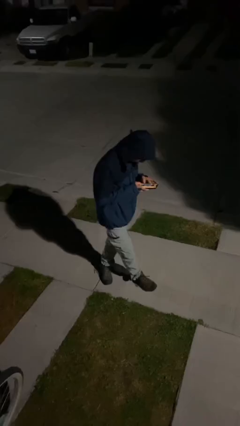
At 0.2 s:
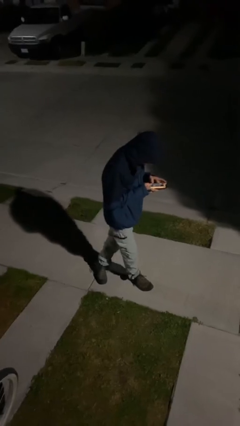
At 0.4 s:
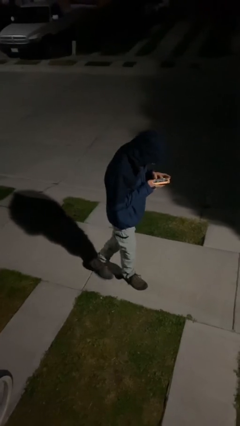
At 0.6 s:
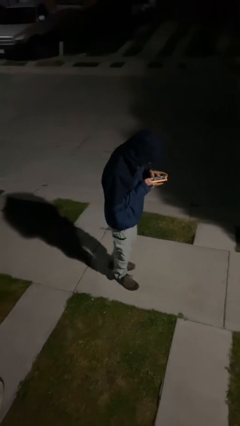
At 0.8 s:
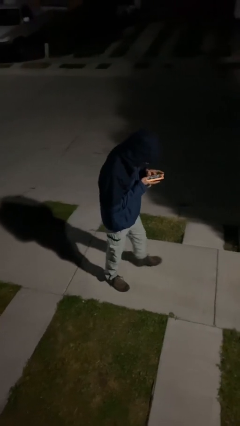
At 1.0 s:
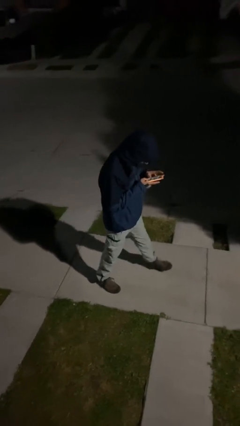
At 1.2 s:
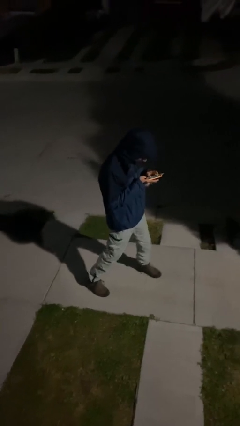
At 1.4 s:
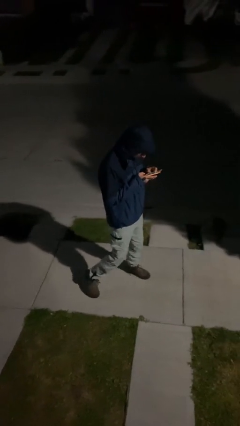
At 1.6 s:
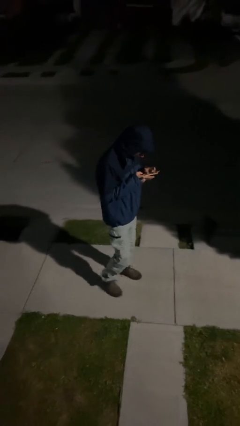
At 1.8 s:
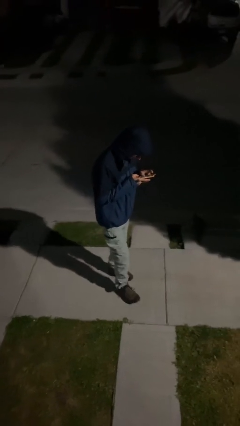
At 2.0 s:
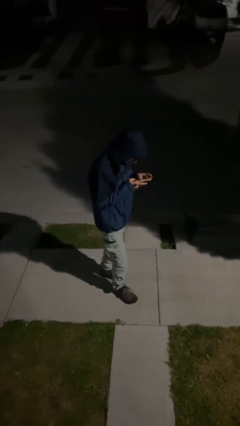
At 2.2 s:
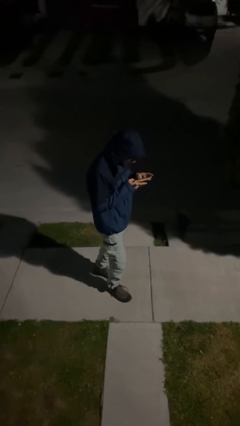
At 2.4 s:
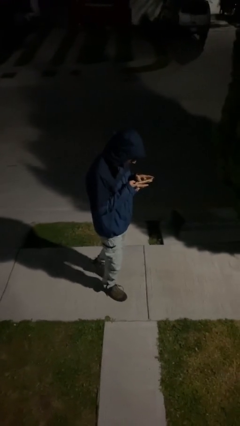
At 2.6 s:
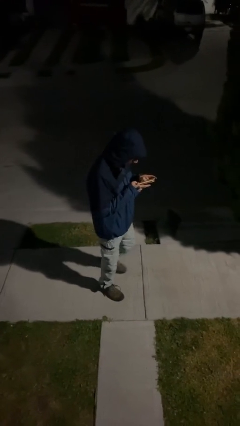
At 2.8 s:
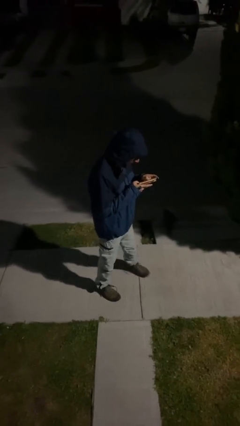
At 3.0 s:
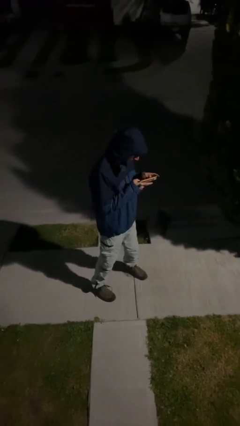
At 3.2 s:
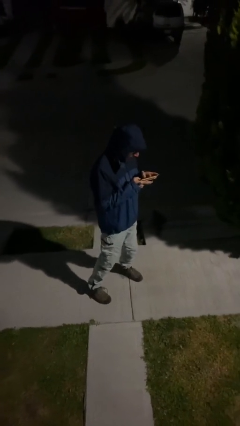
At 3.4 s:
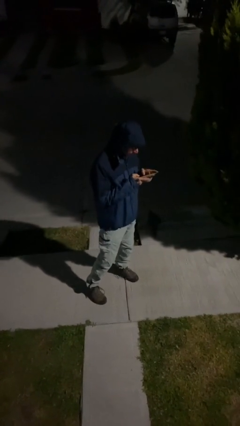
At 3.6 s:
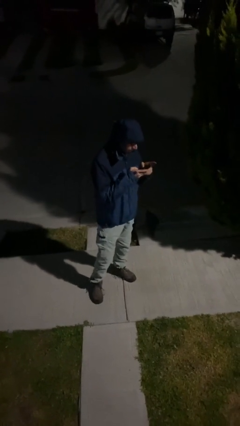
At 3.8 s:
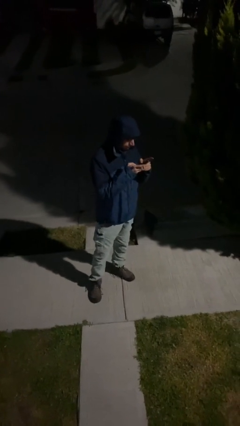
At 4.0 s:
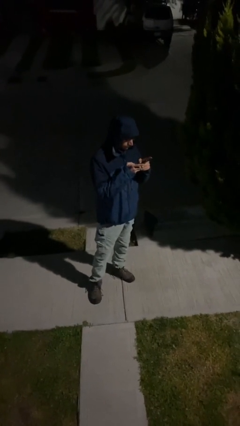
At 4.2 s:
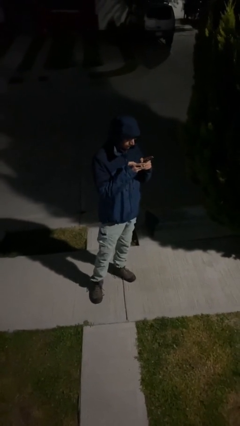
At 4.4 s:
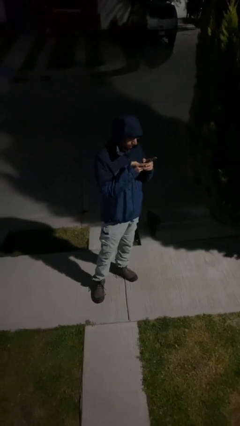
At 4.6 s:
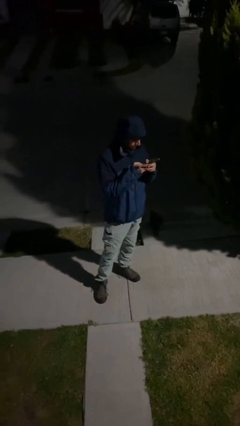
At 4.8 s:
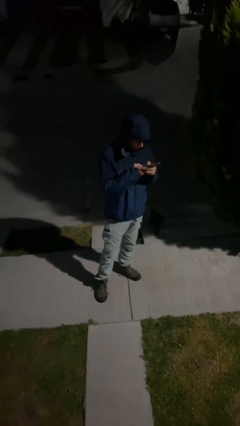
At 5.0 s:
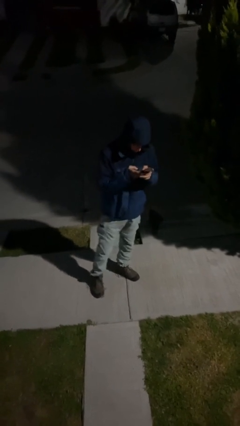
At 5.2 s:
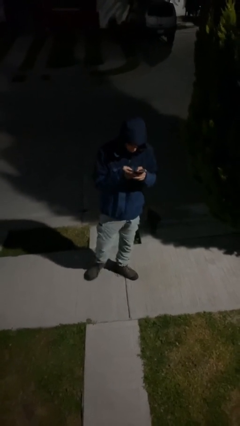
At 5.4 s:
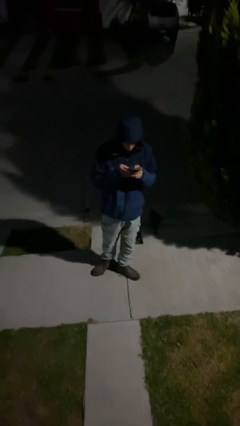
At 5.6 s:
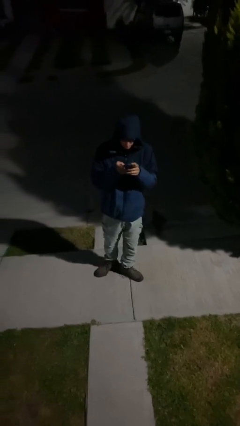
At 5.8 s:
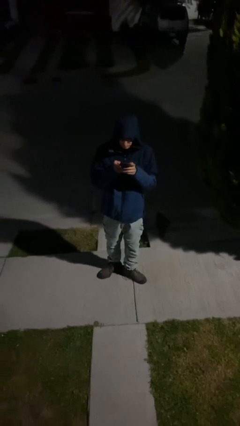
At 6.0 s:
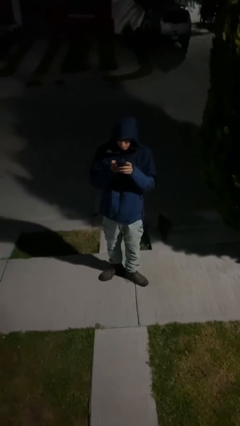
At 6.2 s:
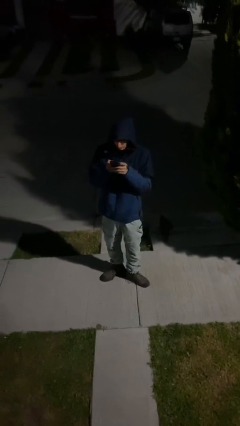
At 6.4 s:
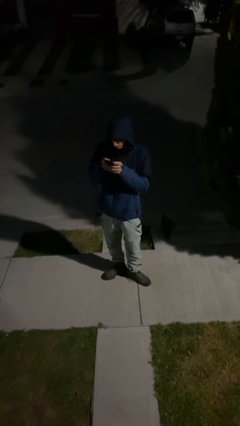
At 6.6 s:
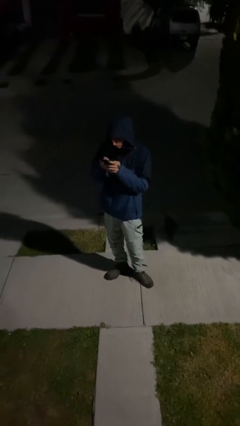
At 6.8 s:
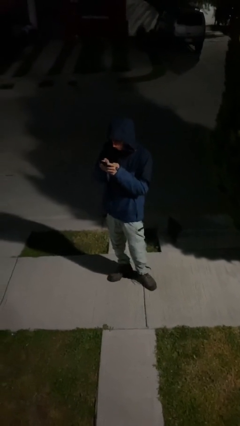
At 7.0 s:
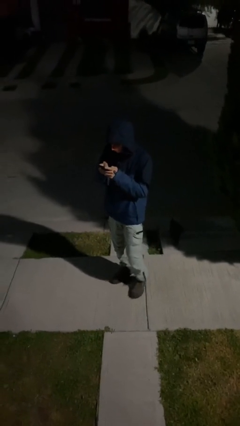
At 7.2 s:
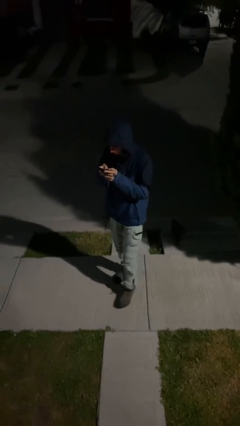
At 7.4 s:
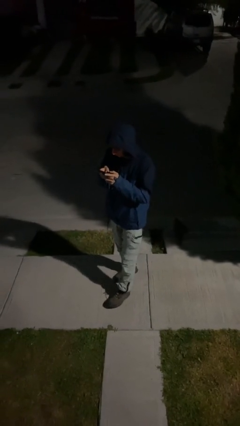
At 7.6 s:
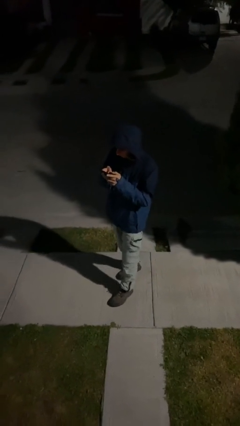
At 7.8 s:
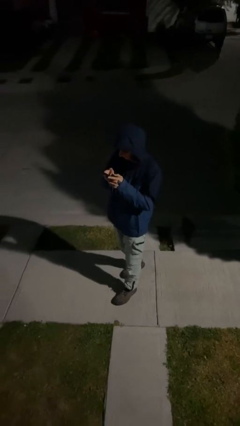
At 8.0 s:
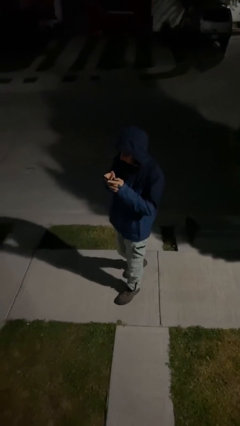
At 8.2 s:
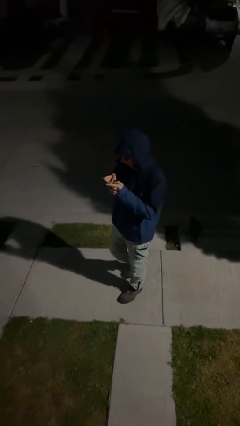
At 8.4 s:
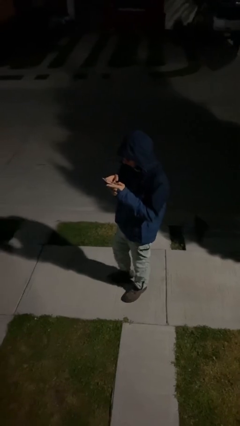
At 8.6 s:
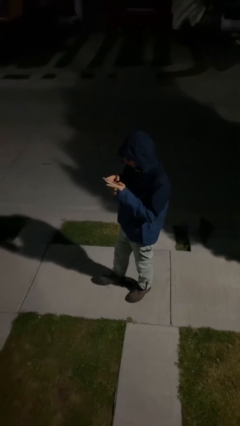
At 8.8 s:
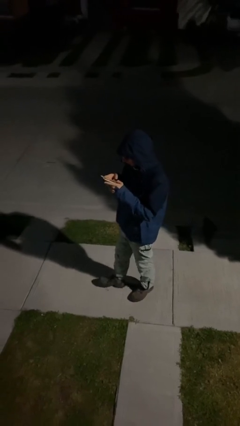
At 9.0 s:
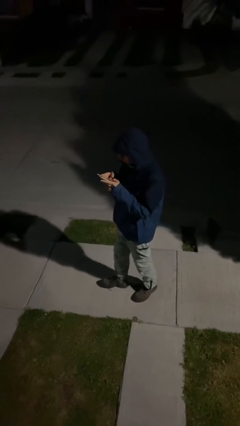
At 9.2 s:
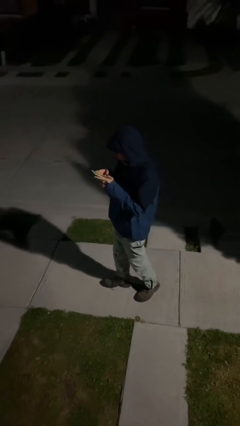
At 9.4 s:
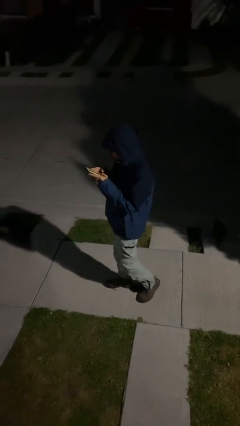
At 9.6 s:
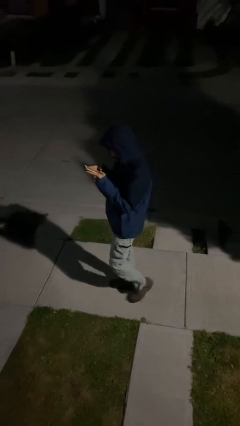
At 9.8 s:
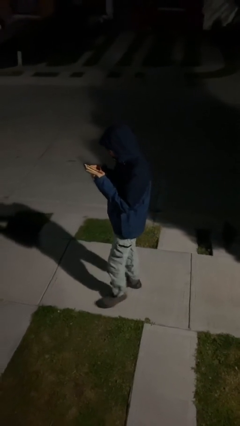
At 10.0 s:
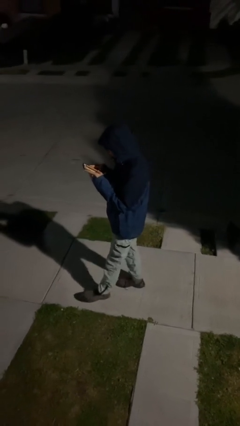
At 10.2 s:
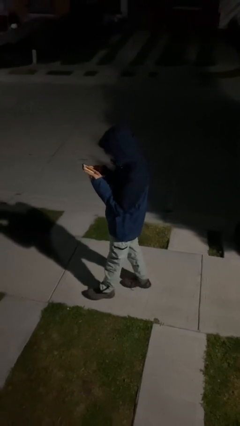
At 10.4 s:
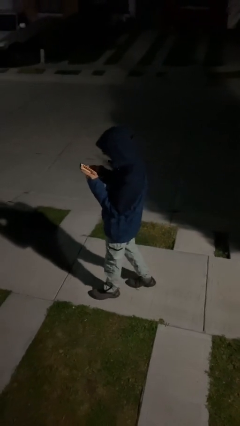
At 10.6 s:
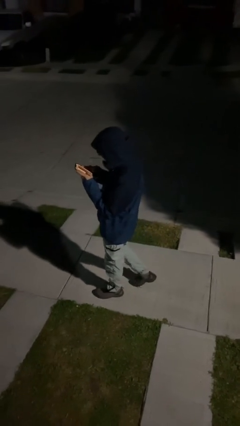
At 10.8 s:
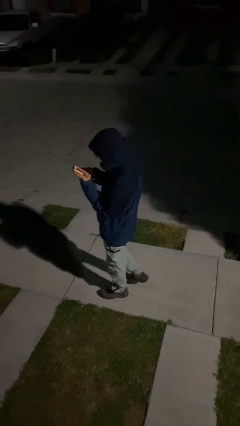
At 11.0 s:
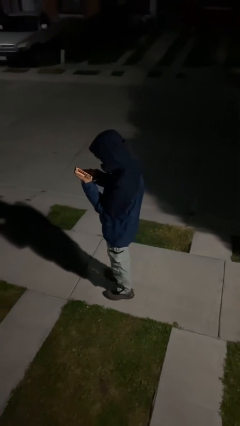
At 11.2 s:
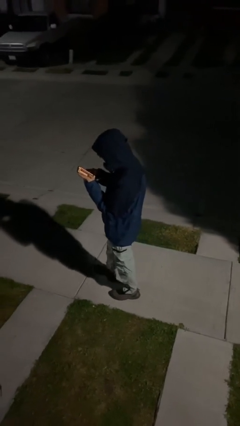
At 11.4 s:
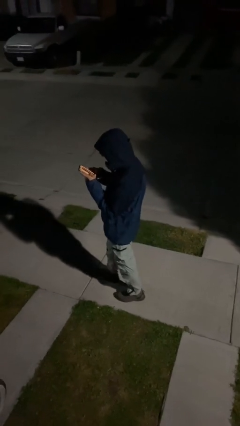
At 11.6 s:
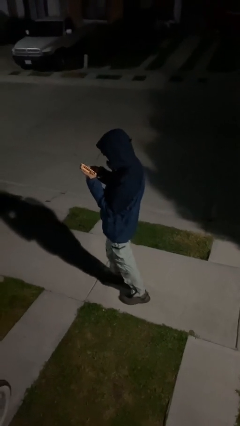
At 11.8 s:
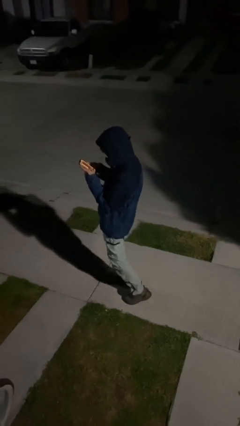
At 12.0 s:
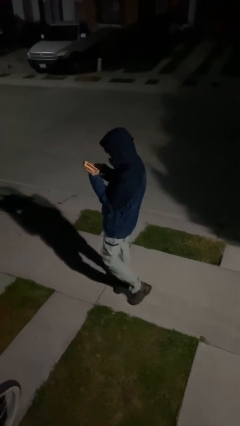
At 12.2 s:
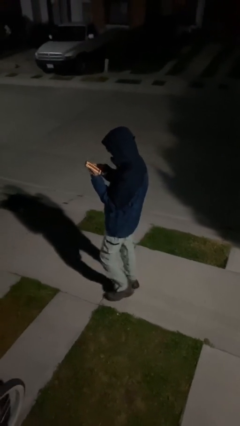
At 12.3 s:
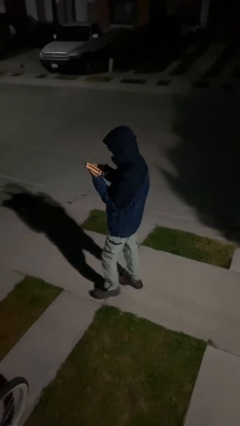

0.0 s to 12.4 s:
person texts on phone

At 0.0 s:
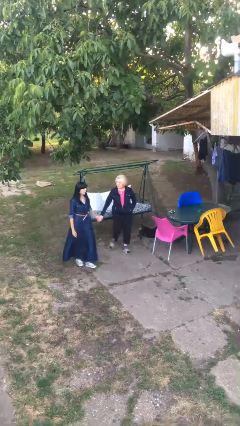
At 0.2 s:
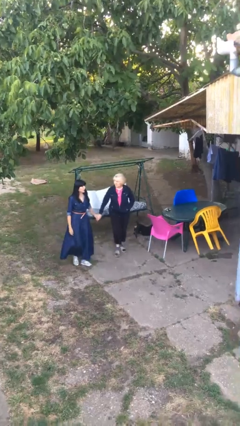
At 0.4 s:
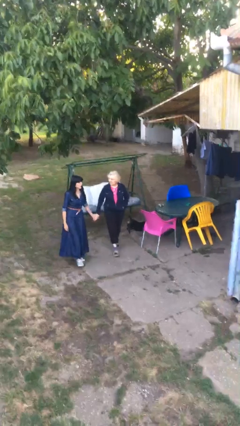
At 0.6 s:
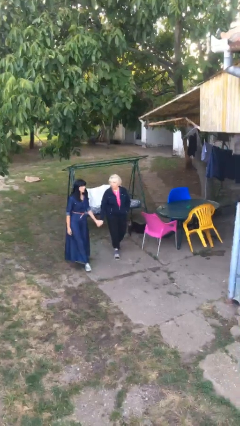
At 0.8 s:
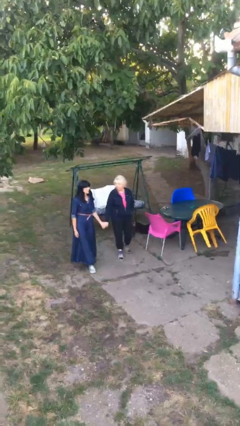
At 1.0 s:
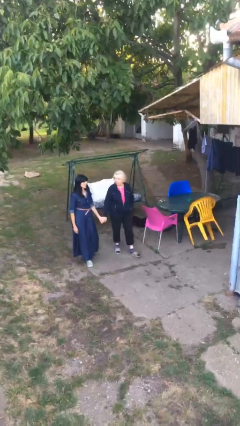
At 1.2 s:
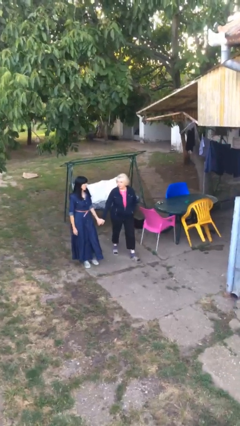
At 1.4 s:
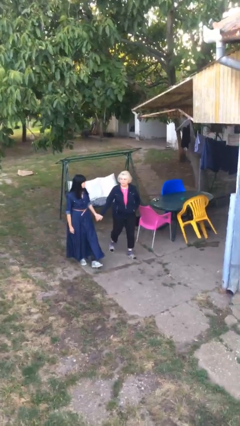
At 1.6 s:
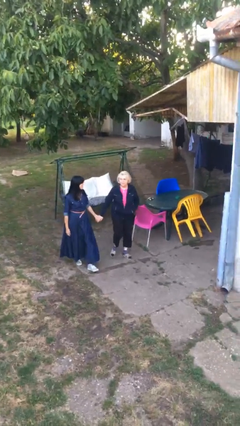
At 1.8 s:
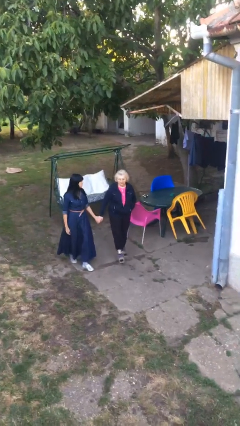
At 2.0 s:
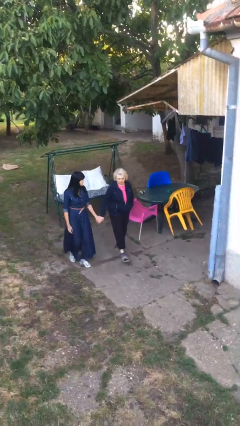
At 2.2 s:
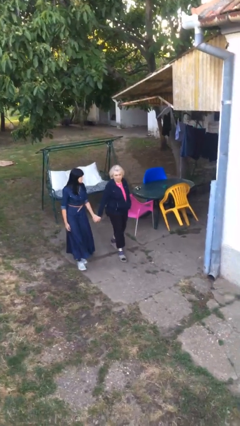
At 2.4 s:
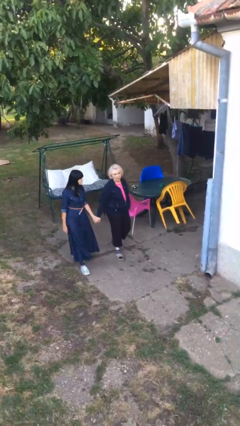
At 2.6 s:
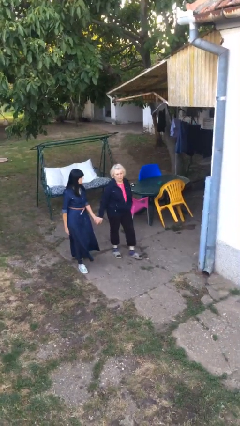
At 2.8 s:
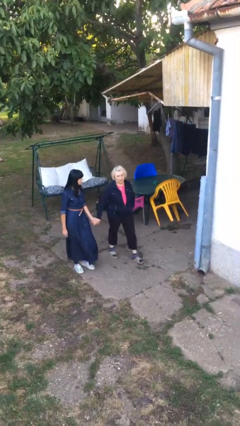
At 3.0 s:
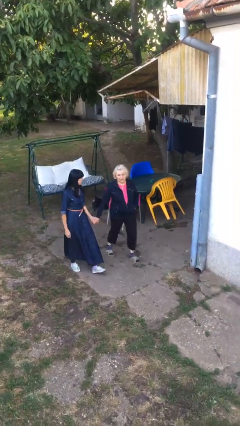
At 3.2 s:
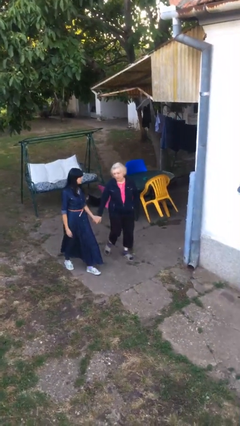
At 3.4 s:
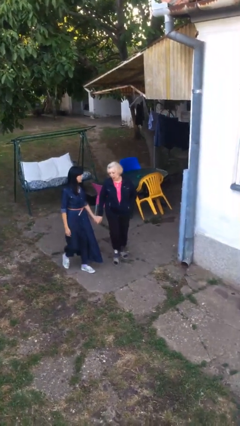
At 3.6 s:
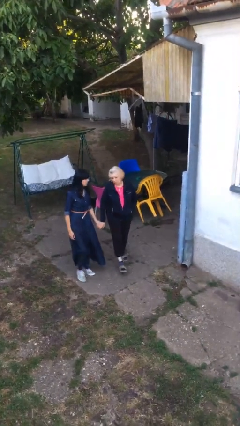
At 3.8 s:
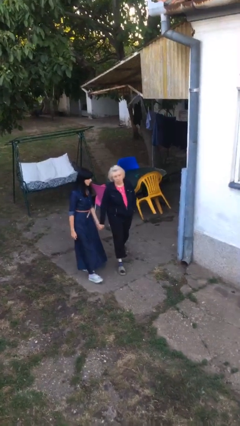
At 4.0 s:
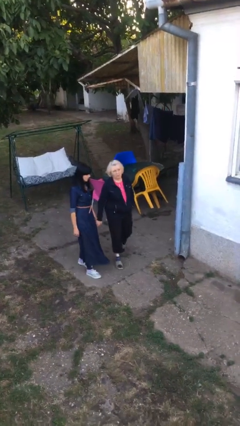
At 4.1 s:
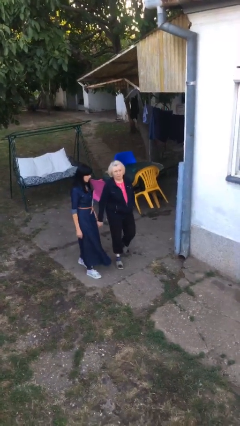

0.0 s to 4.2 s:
person holds hand

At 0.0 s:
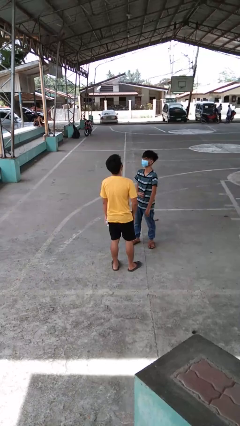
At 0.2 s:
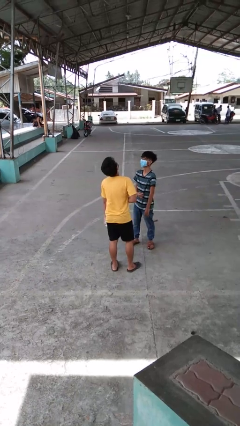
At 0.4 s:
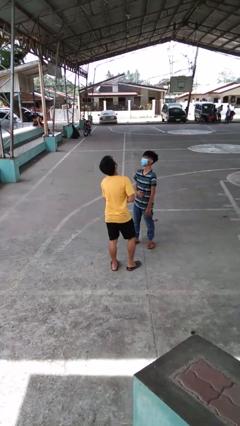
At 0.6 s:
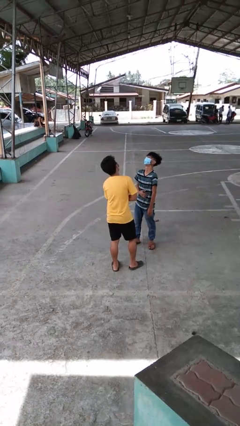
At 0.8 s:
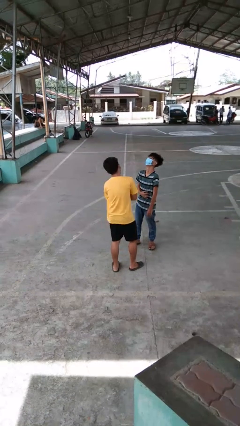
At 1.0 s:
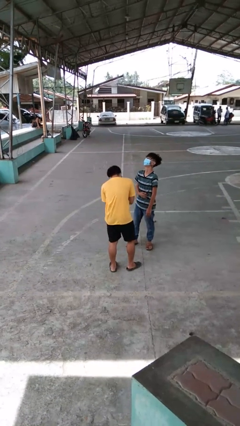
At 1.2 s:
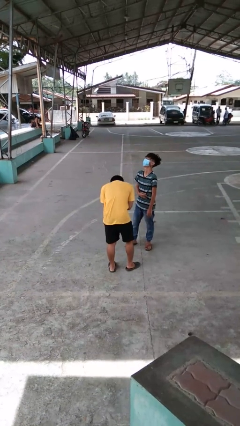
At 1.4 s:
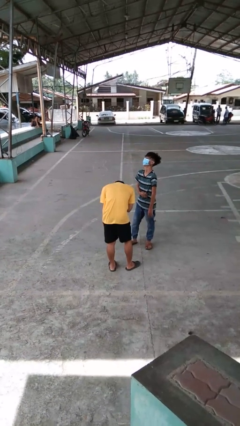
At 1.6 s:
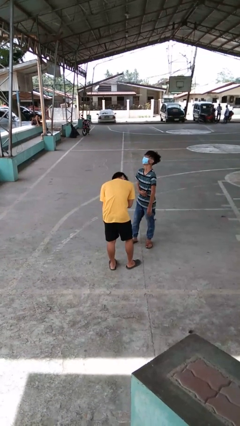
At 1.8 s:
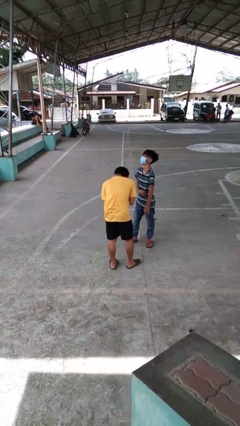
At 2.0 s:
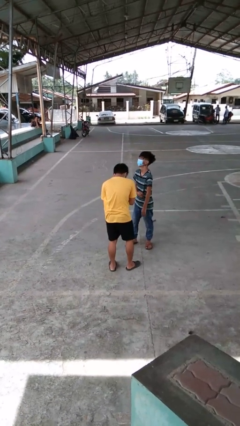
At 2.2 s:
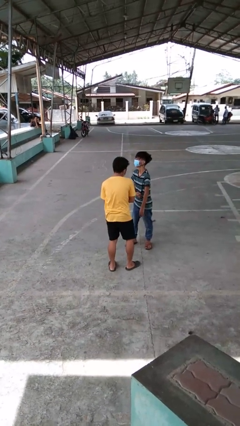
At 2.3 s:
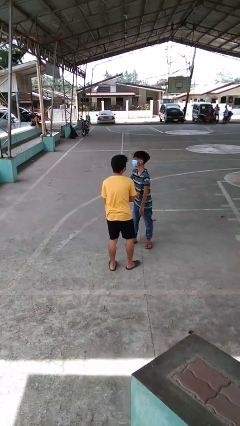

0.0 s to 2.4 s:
person laughs with person
